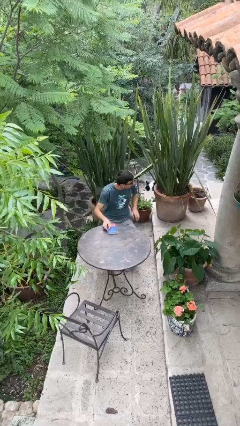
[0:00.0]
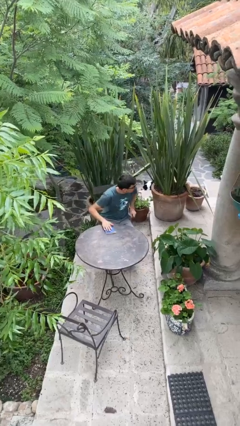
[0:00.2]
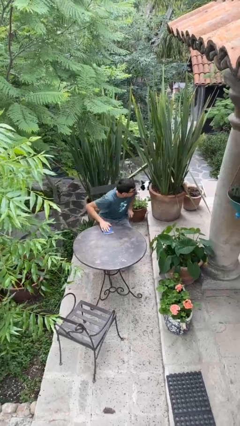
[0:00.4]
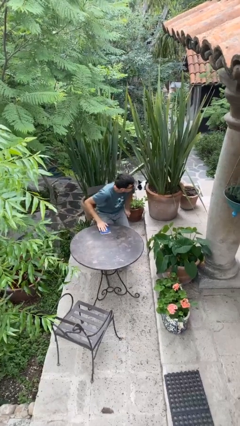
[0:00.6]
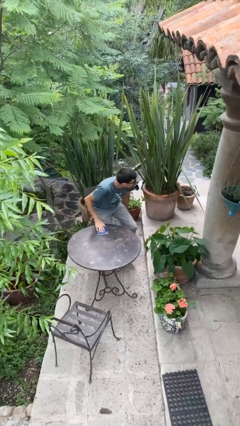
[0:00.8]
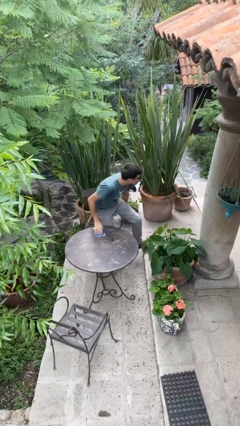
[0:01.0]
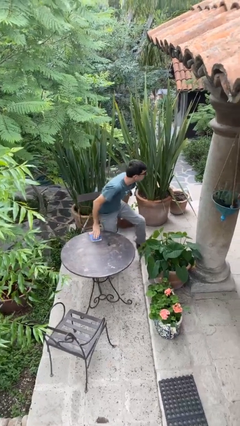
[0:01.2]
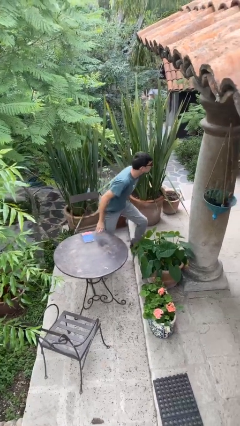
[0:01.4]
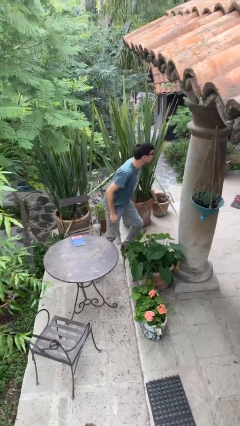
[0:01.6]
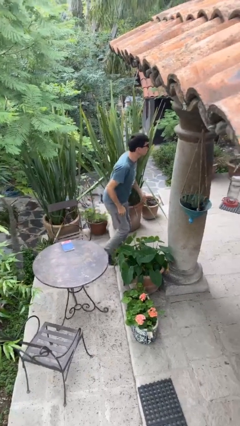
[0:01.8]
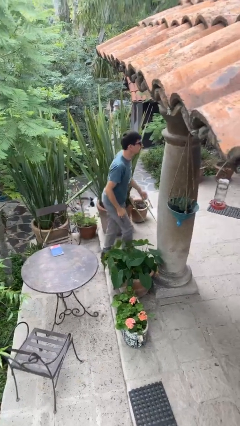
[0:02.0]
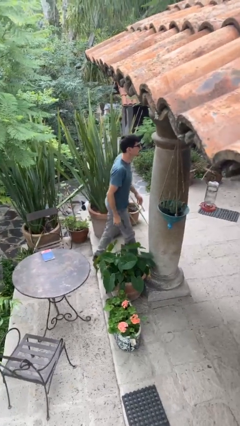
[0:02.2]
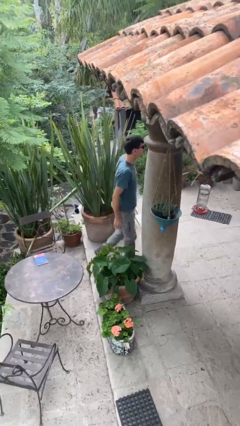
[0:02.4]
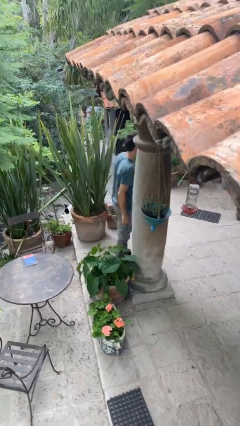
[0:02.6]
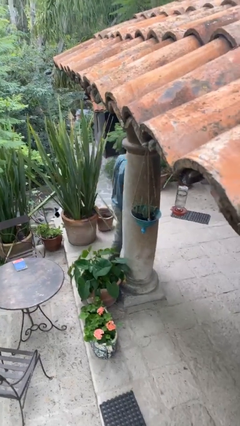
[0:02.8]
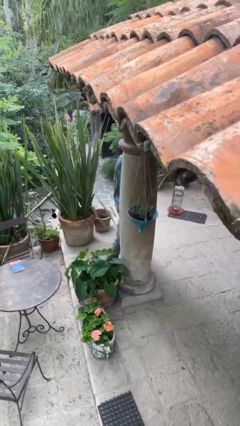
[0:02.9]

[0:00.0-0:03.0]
person stands up

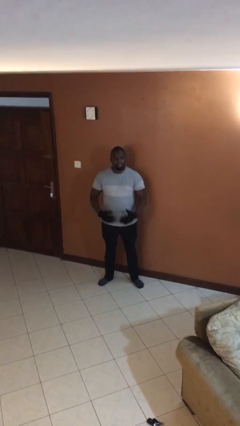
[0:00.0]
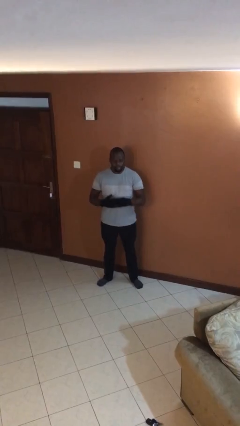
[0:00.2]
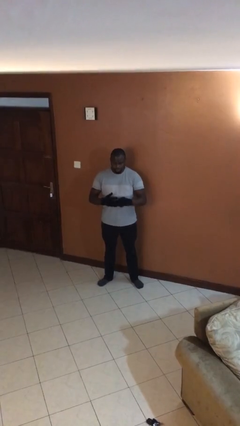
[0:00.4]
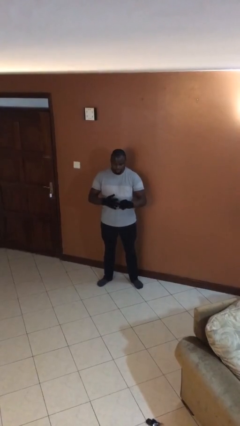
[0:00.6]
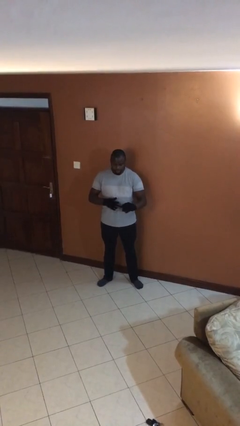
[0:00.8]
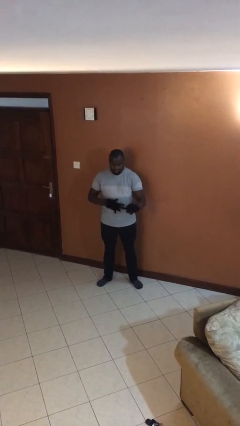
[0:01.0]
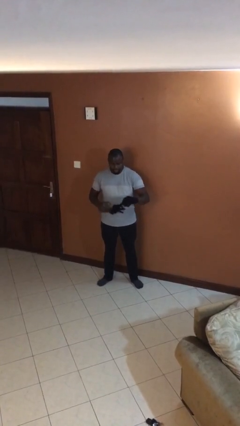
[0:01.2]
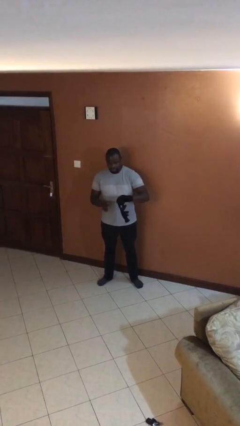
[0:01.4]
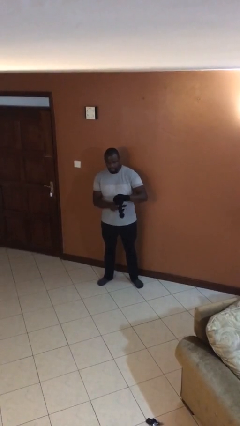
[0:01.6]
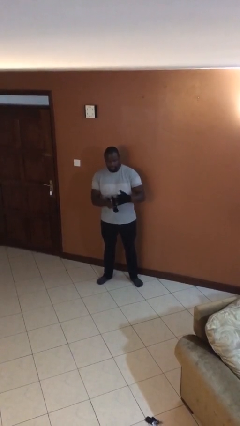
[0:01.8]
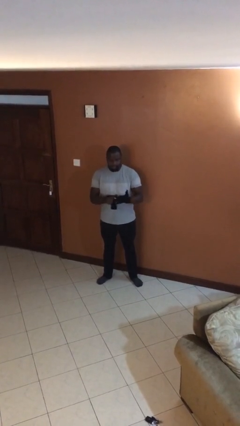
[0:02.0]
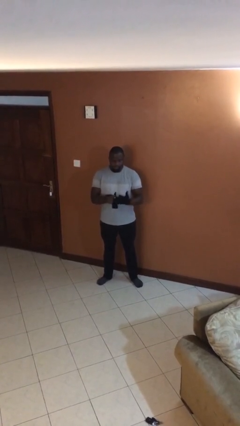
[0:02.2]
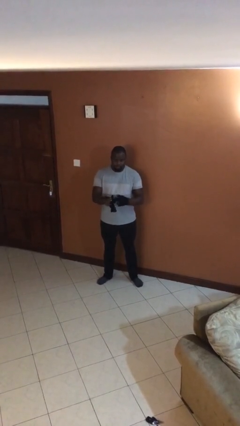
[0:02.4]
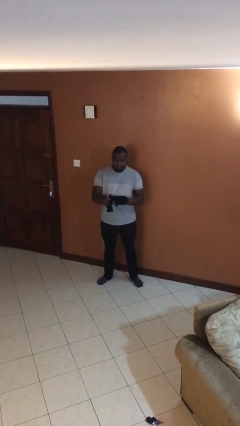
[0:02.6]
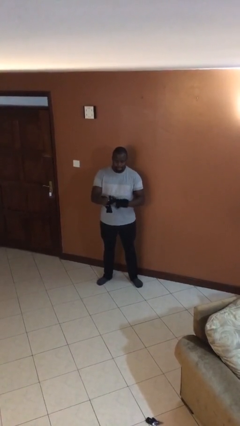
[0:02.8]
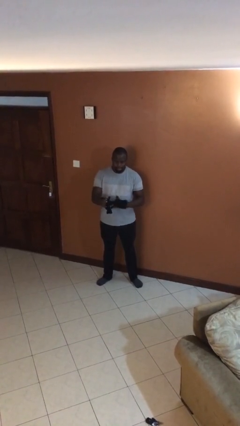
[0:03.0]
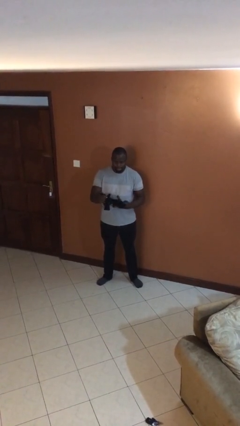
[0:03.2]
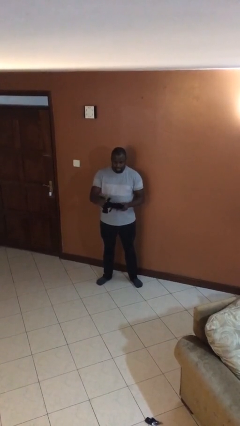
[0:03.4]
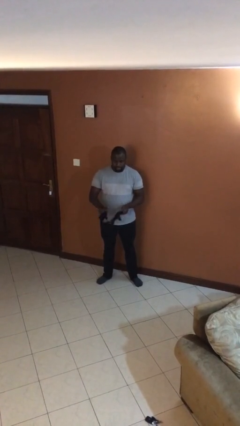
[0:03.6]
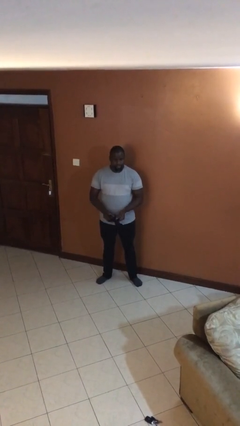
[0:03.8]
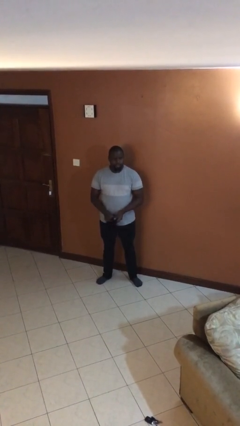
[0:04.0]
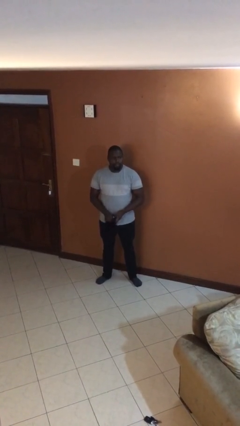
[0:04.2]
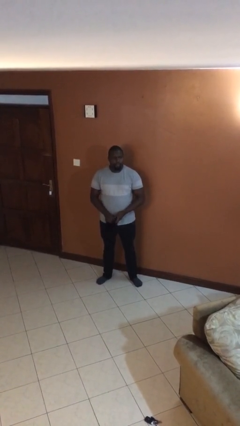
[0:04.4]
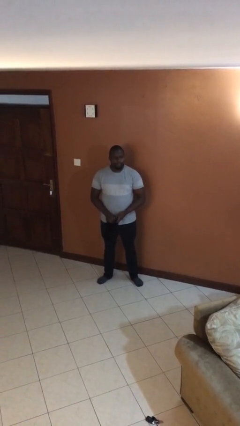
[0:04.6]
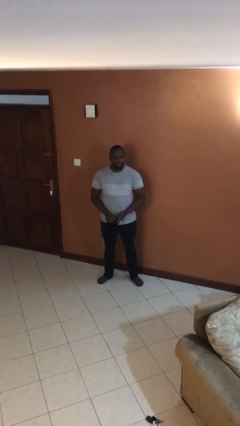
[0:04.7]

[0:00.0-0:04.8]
person takes off gloves

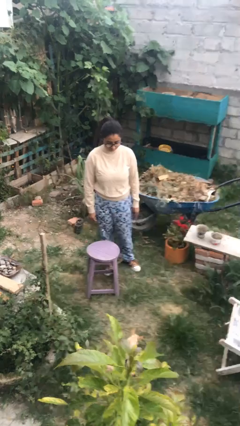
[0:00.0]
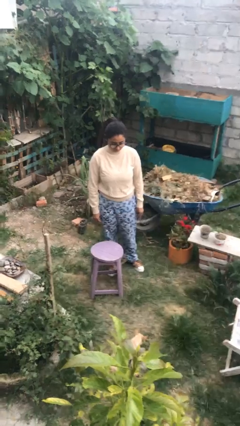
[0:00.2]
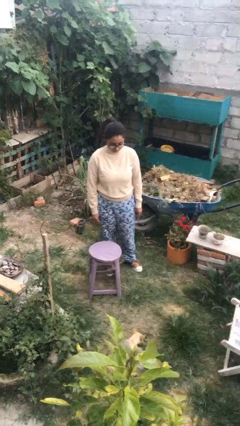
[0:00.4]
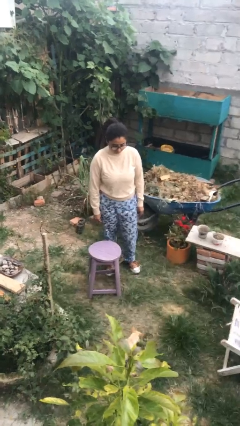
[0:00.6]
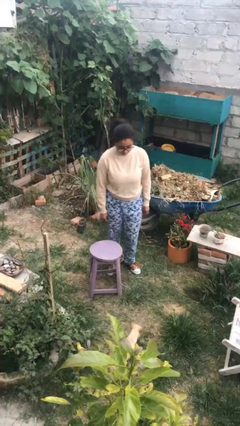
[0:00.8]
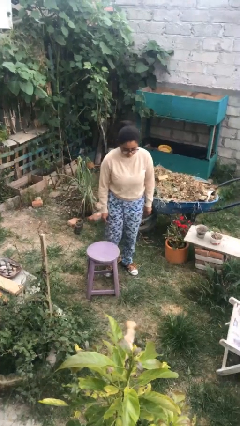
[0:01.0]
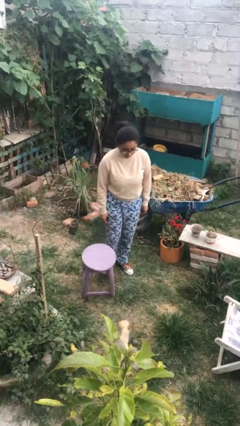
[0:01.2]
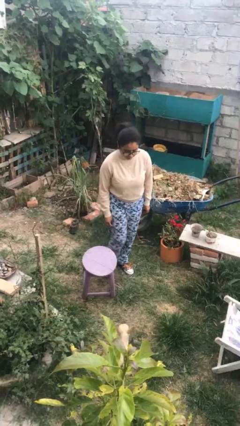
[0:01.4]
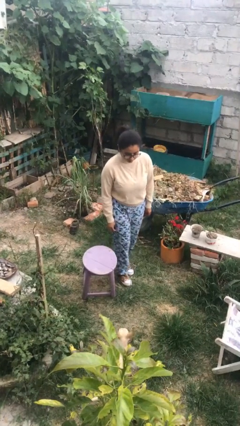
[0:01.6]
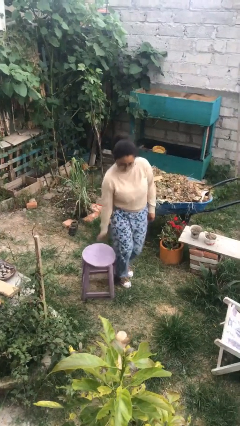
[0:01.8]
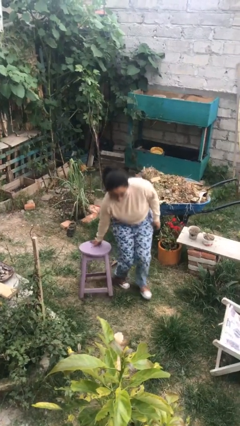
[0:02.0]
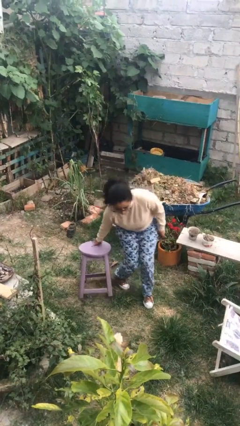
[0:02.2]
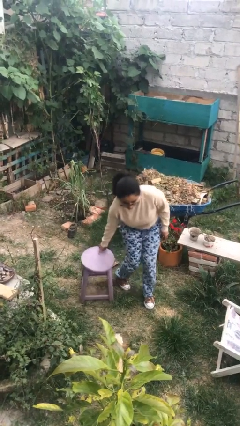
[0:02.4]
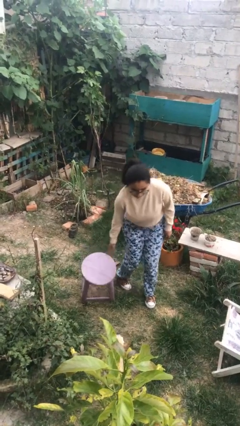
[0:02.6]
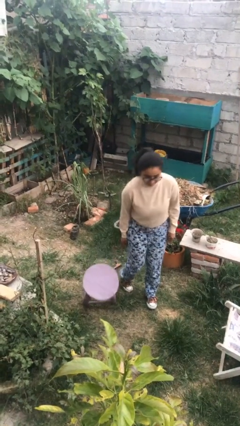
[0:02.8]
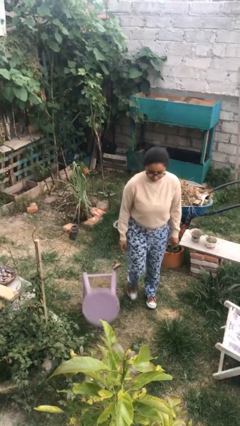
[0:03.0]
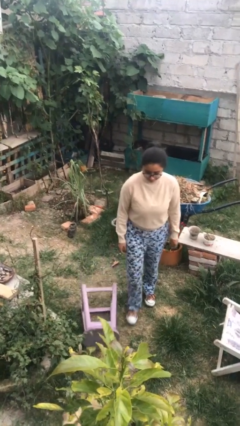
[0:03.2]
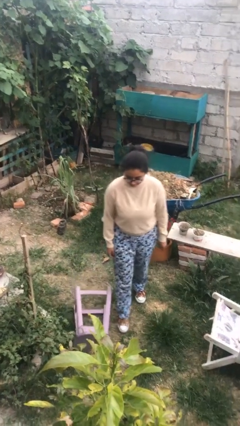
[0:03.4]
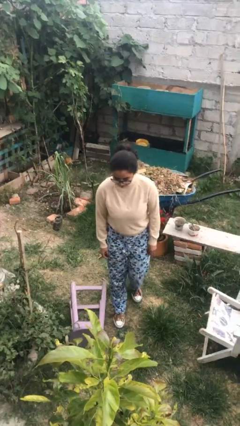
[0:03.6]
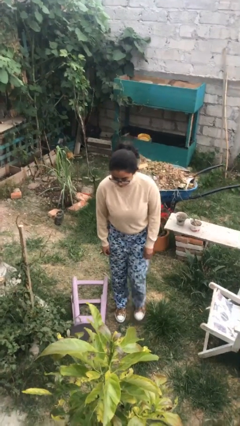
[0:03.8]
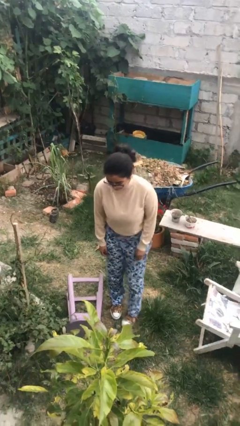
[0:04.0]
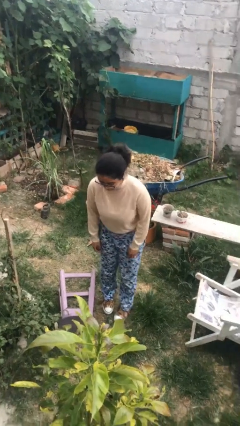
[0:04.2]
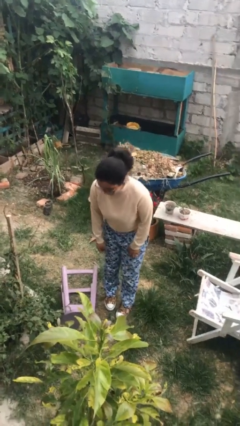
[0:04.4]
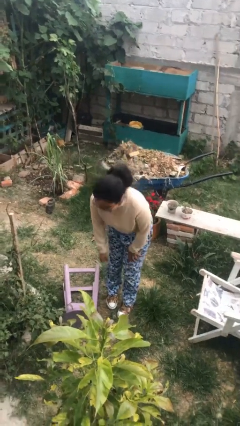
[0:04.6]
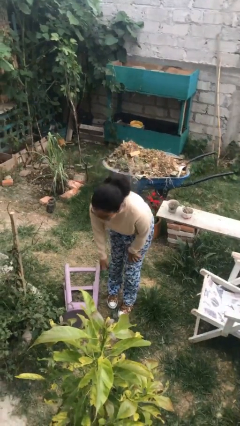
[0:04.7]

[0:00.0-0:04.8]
person knocks over furniture

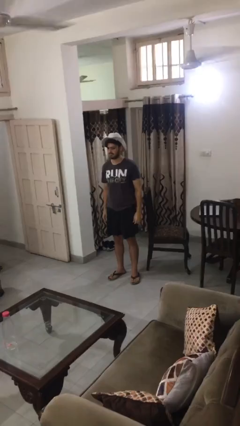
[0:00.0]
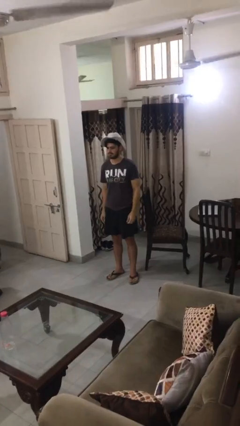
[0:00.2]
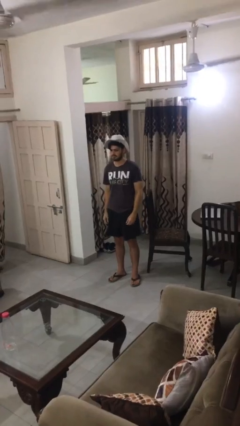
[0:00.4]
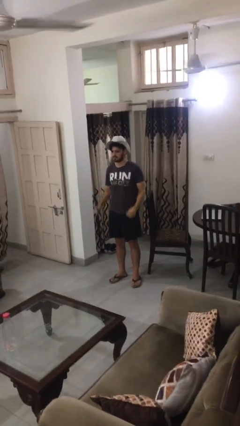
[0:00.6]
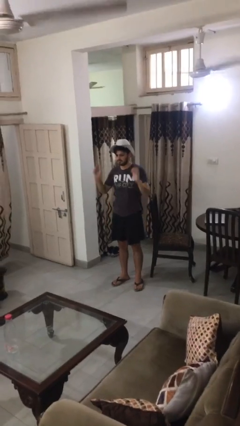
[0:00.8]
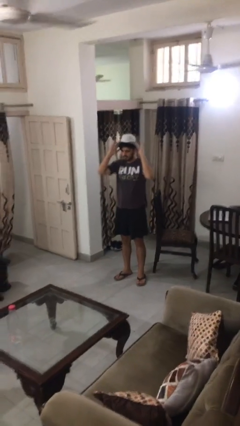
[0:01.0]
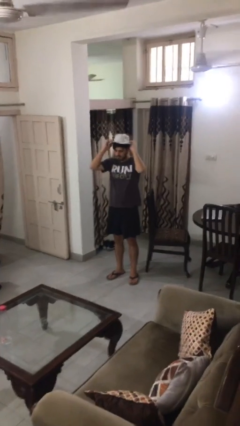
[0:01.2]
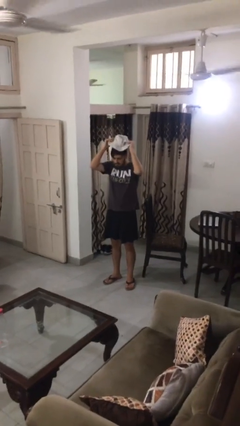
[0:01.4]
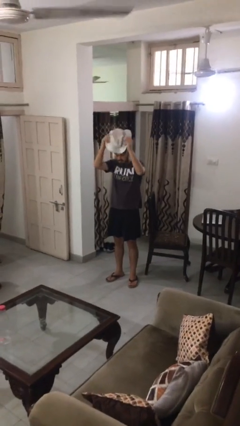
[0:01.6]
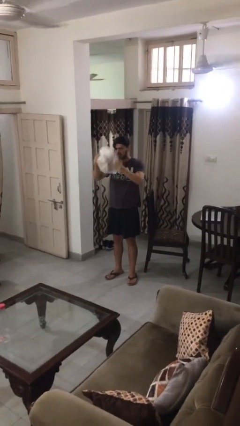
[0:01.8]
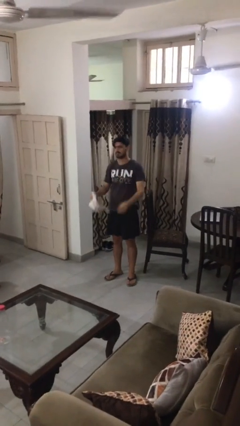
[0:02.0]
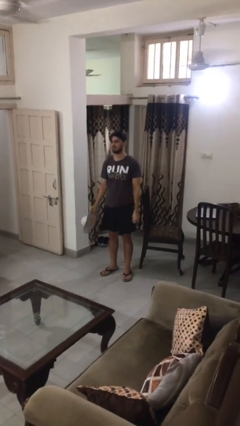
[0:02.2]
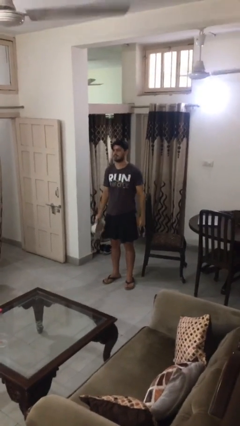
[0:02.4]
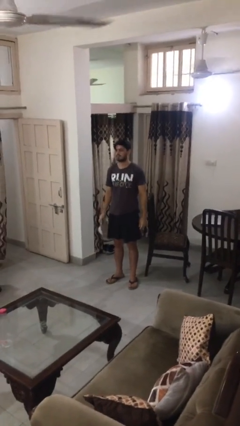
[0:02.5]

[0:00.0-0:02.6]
person takes off hat

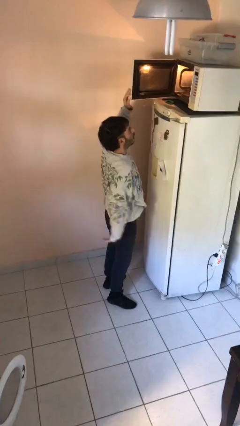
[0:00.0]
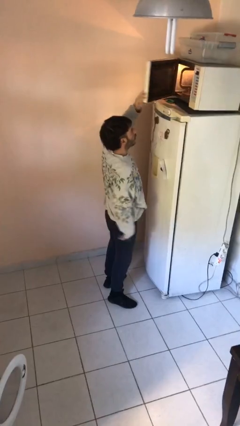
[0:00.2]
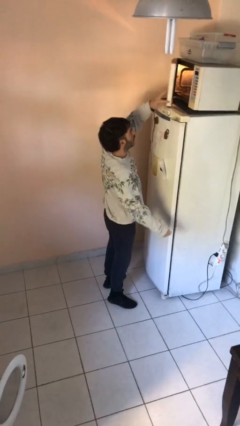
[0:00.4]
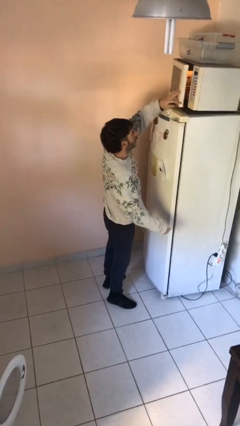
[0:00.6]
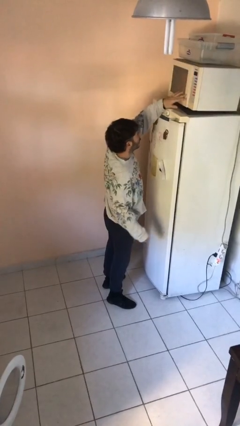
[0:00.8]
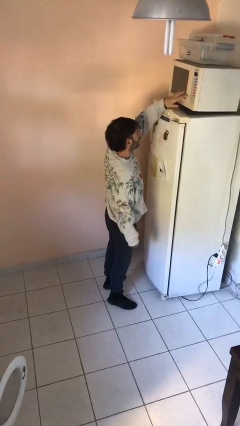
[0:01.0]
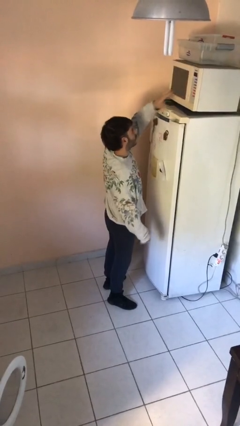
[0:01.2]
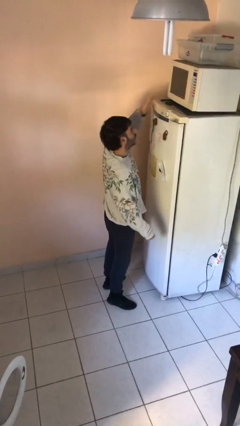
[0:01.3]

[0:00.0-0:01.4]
person closes microwave

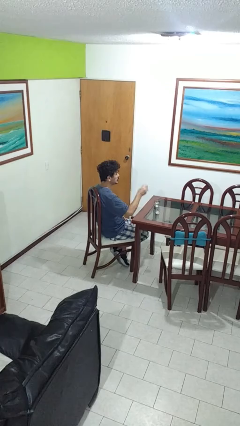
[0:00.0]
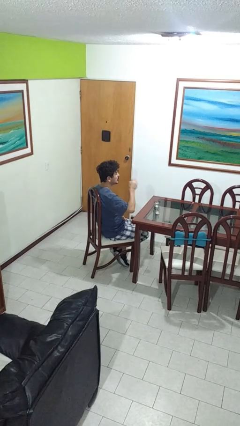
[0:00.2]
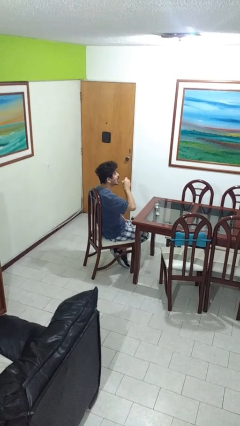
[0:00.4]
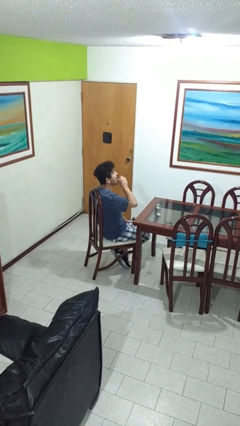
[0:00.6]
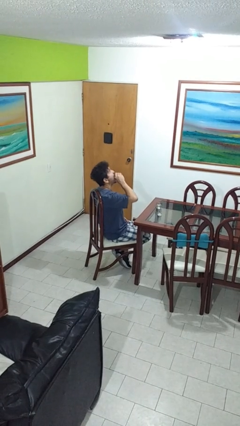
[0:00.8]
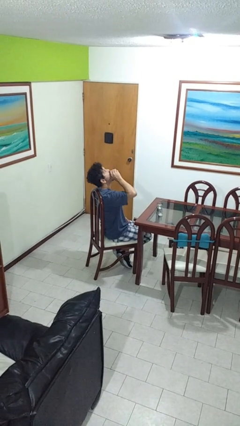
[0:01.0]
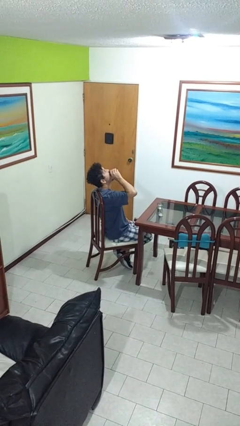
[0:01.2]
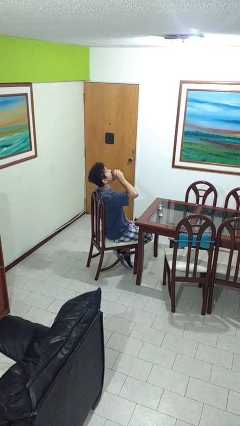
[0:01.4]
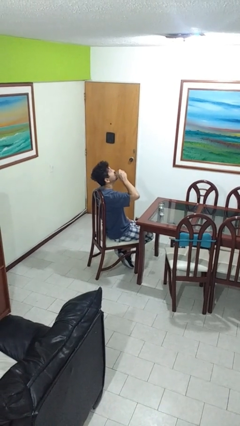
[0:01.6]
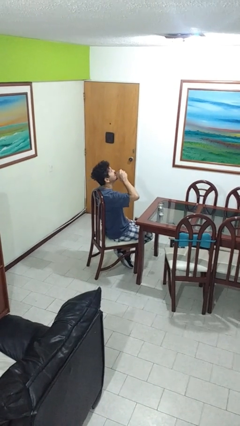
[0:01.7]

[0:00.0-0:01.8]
person drinks from shotglass
